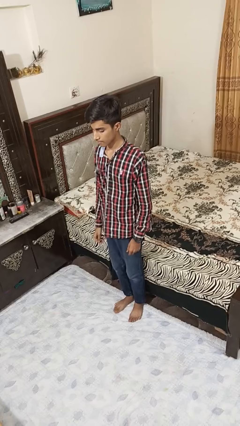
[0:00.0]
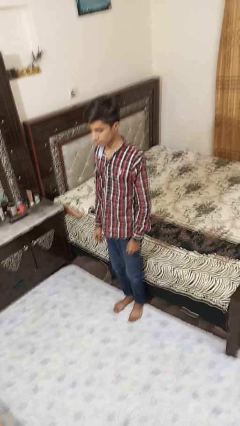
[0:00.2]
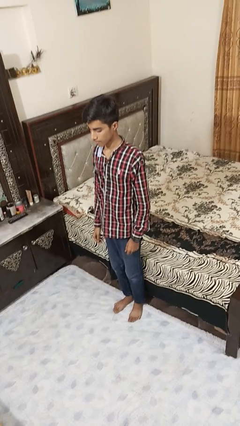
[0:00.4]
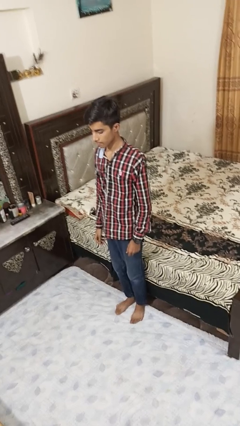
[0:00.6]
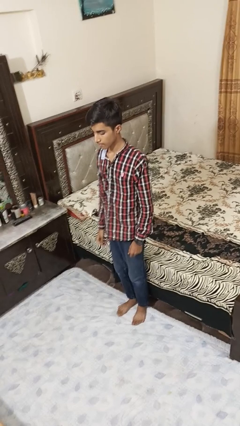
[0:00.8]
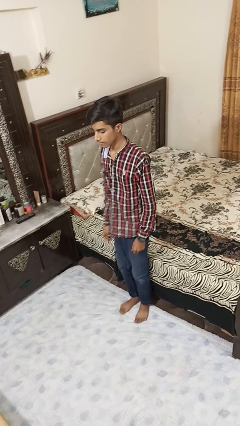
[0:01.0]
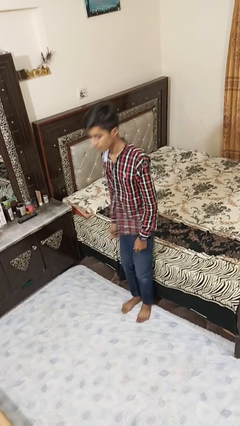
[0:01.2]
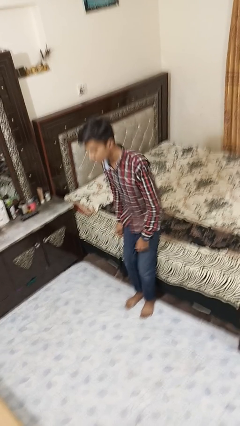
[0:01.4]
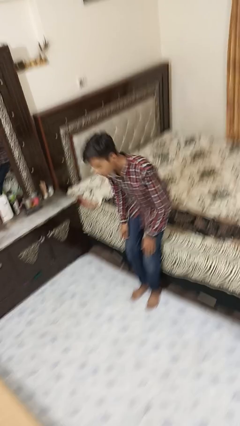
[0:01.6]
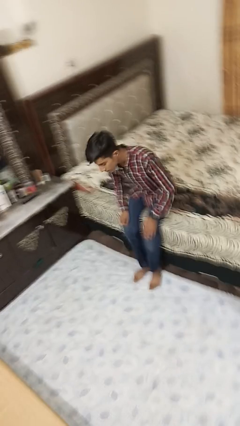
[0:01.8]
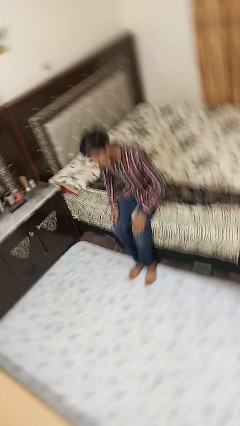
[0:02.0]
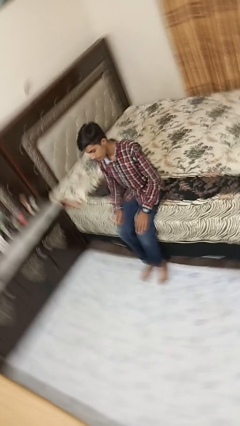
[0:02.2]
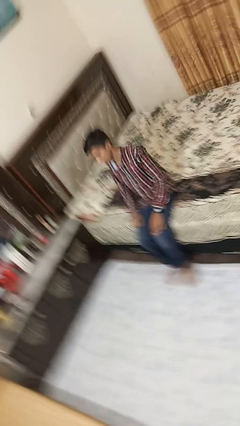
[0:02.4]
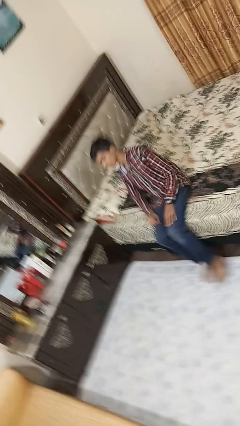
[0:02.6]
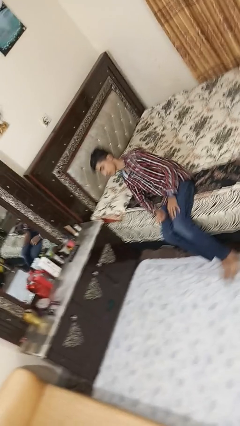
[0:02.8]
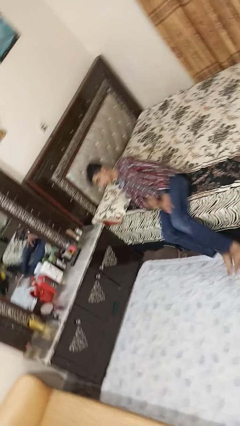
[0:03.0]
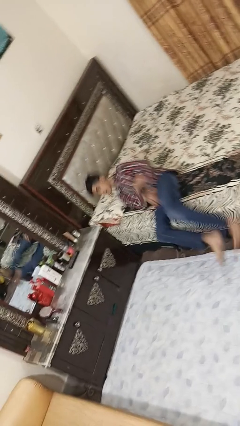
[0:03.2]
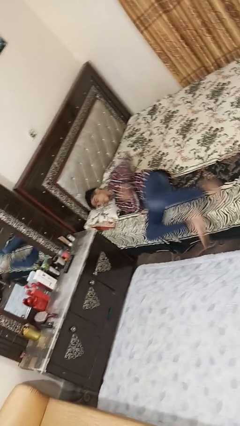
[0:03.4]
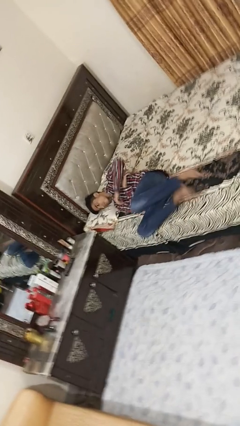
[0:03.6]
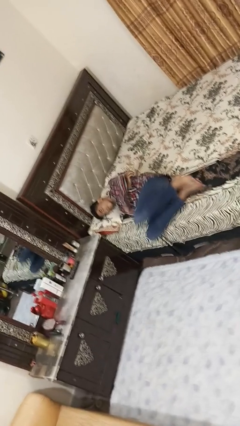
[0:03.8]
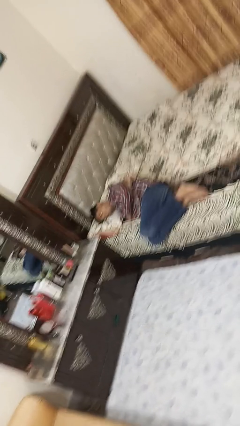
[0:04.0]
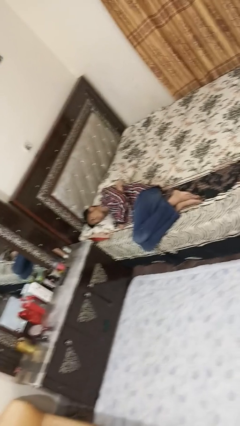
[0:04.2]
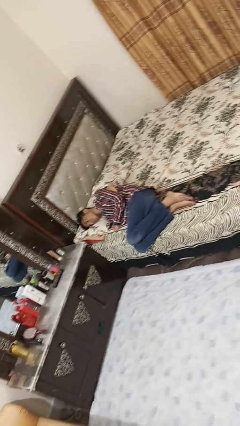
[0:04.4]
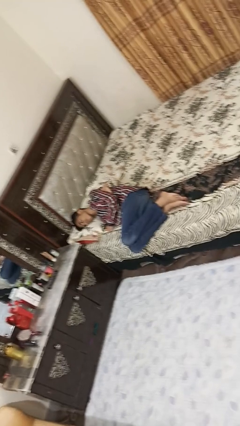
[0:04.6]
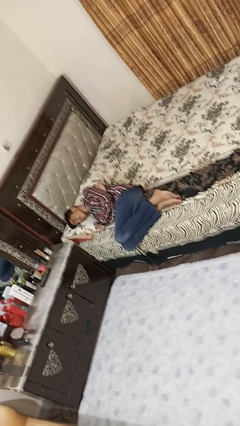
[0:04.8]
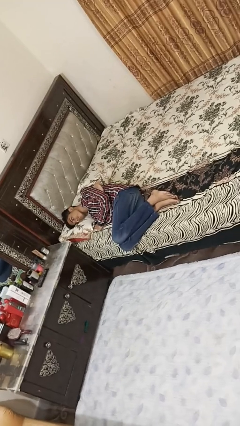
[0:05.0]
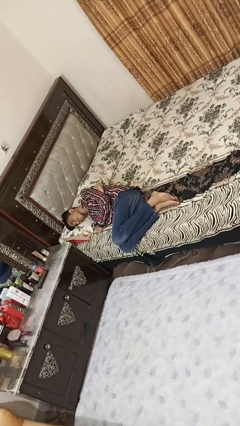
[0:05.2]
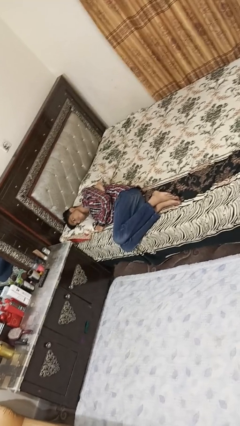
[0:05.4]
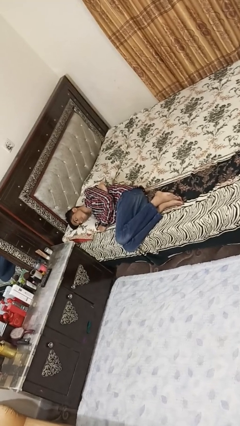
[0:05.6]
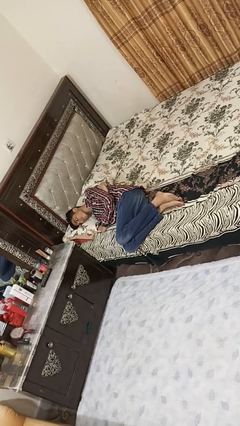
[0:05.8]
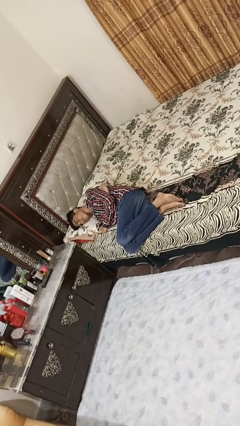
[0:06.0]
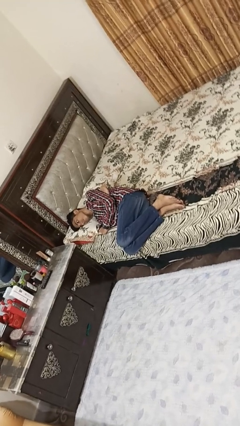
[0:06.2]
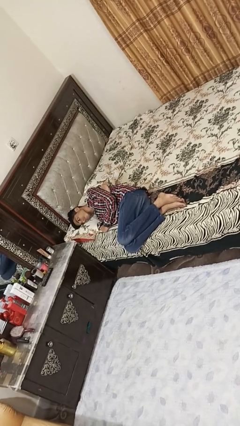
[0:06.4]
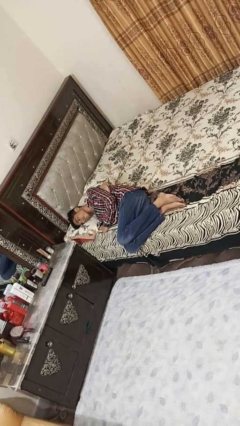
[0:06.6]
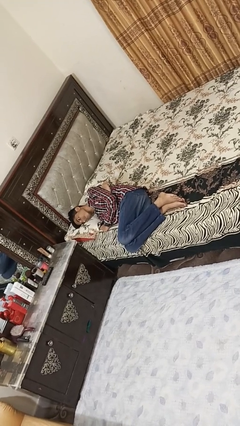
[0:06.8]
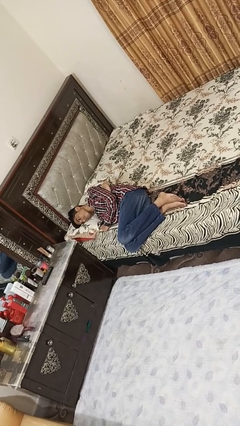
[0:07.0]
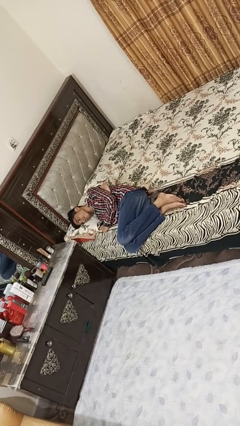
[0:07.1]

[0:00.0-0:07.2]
person lies down on bed

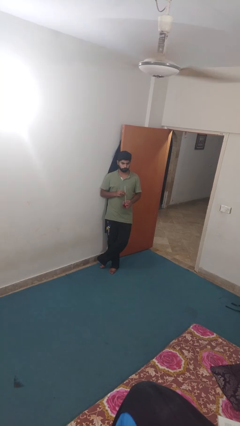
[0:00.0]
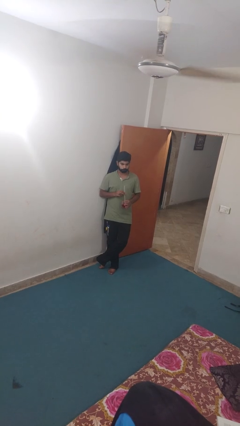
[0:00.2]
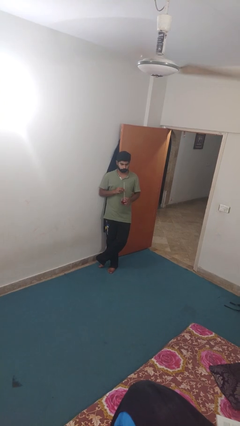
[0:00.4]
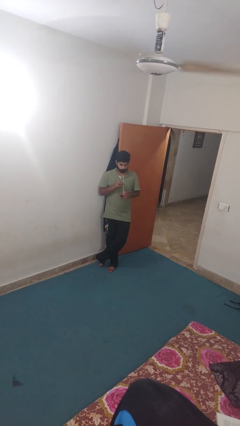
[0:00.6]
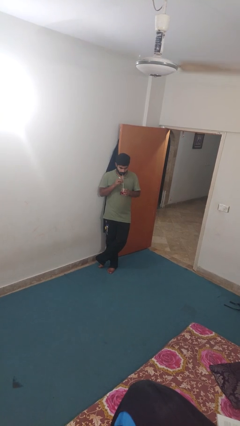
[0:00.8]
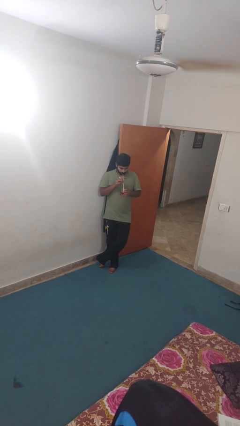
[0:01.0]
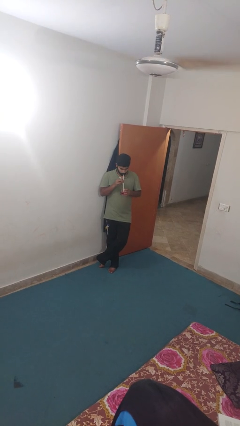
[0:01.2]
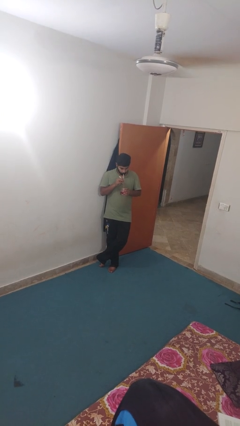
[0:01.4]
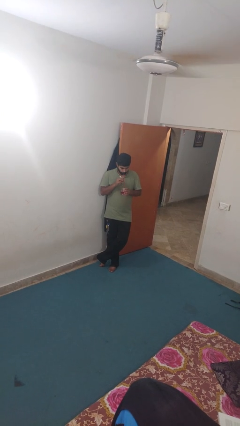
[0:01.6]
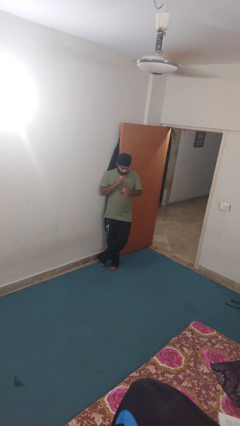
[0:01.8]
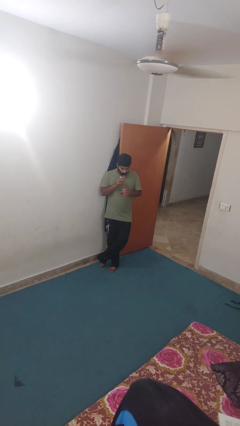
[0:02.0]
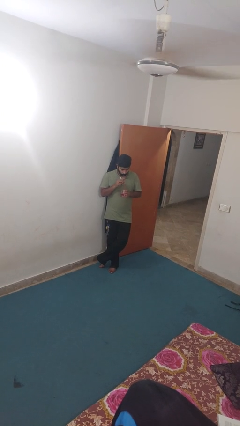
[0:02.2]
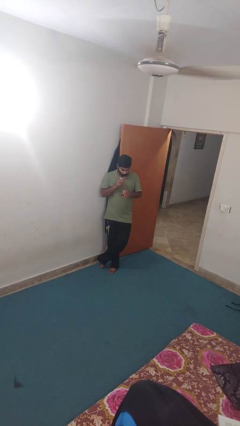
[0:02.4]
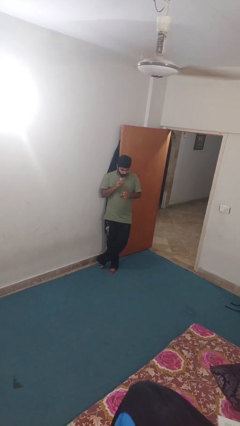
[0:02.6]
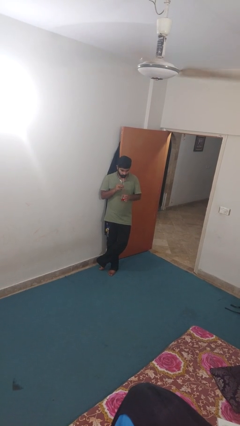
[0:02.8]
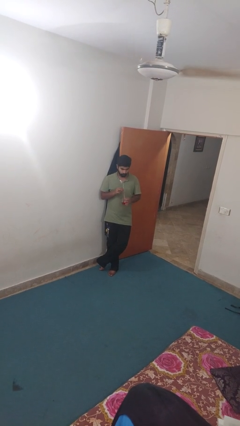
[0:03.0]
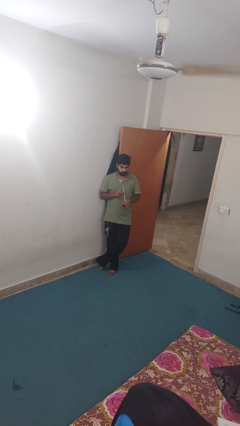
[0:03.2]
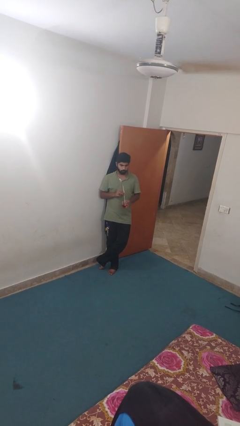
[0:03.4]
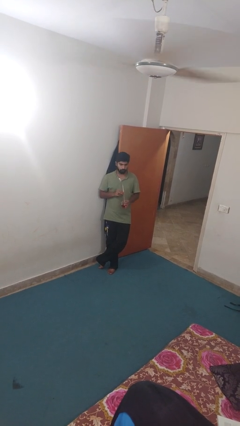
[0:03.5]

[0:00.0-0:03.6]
person drinks from straw

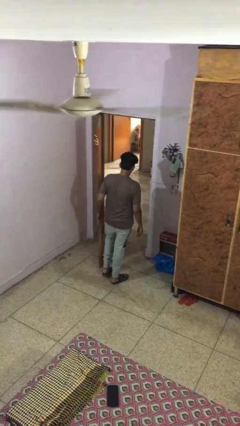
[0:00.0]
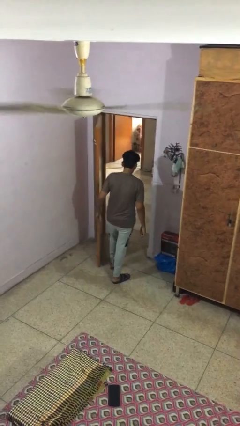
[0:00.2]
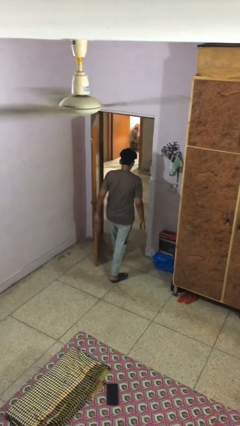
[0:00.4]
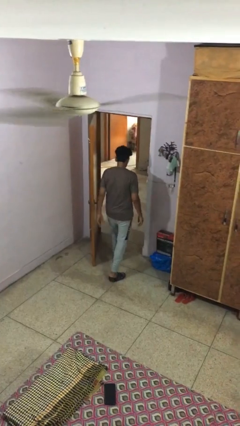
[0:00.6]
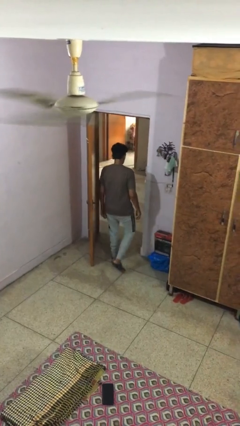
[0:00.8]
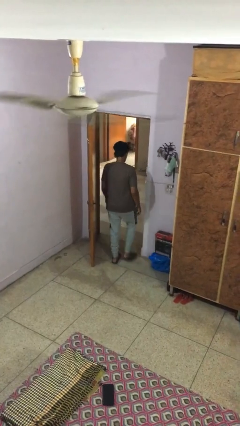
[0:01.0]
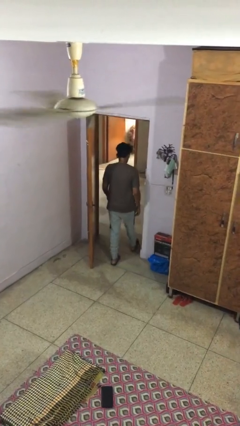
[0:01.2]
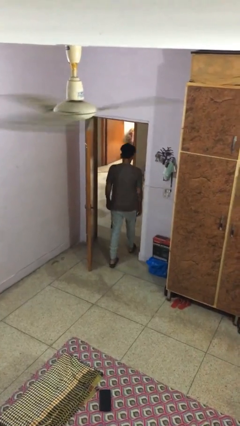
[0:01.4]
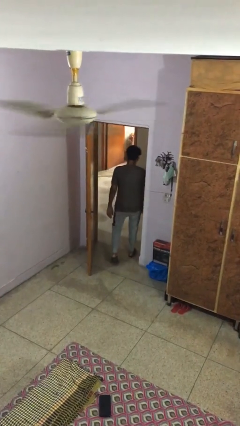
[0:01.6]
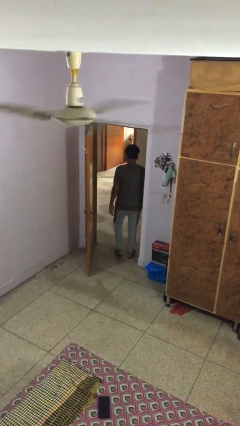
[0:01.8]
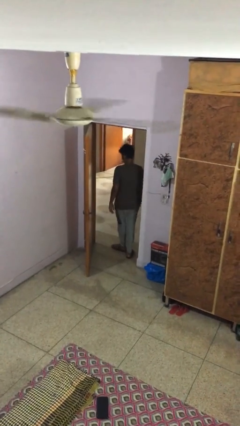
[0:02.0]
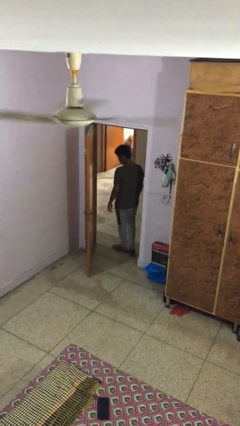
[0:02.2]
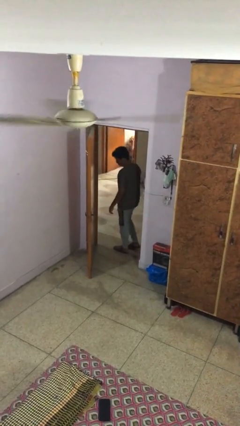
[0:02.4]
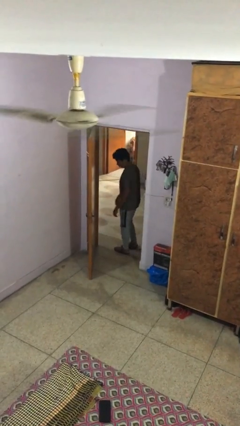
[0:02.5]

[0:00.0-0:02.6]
person exits scene through structure

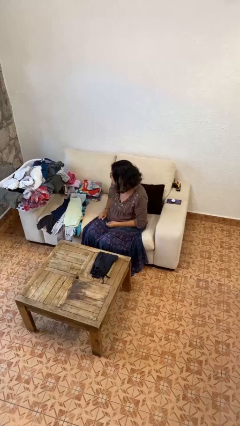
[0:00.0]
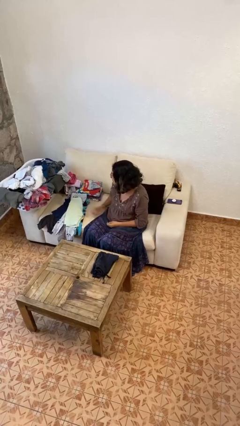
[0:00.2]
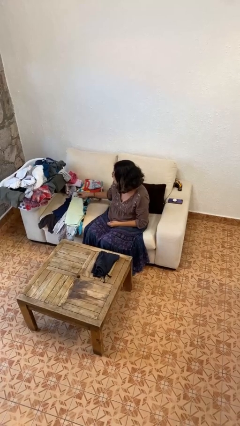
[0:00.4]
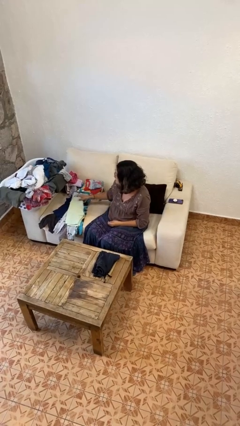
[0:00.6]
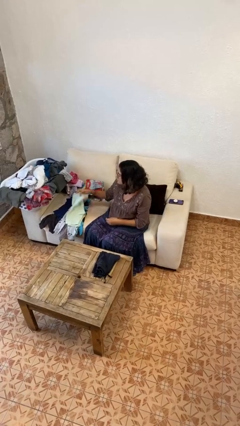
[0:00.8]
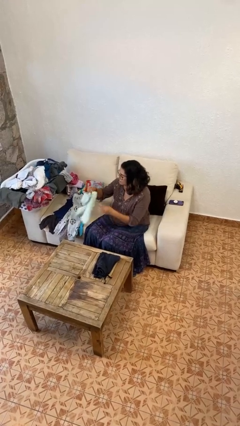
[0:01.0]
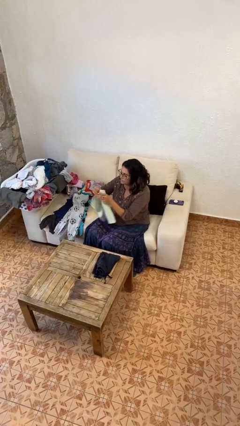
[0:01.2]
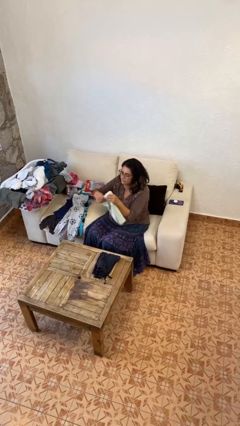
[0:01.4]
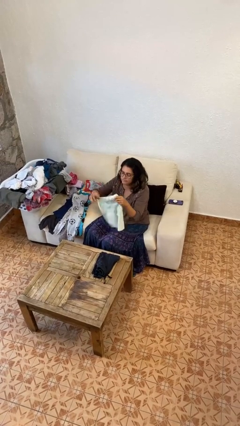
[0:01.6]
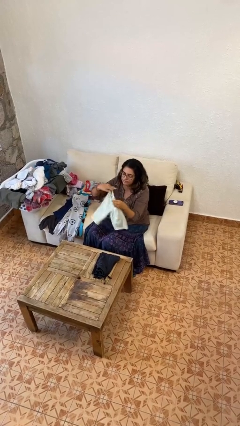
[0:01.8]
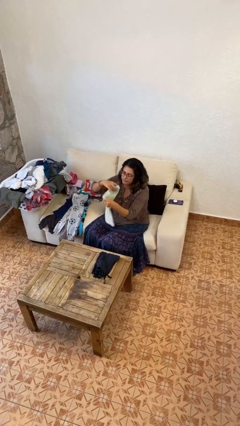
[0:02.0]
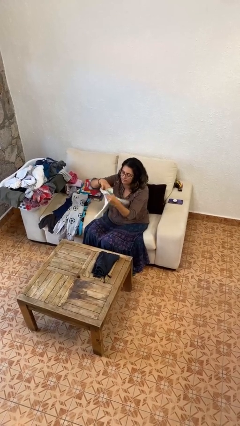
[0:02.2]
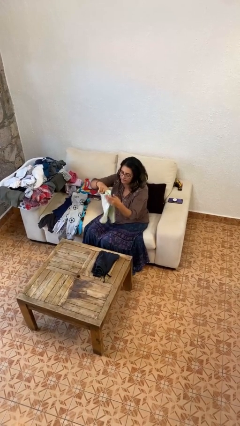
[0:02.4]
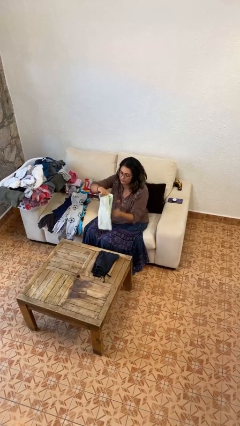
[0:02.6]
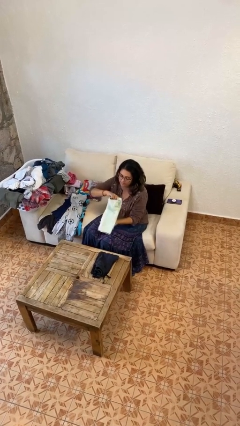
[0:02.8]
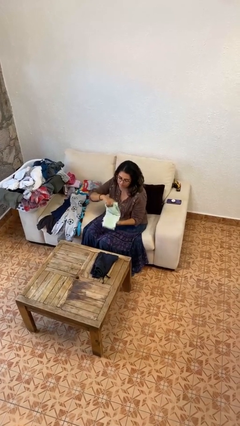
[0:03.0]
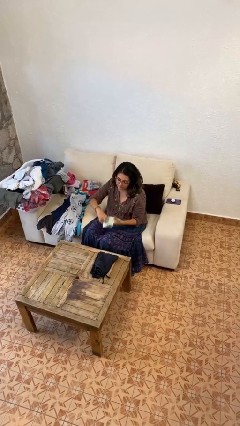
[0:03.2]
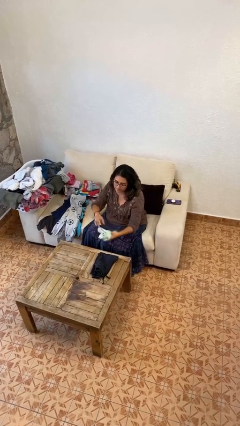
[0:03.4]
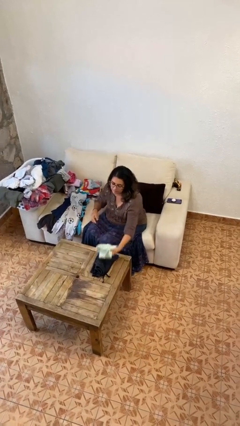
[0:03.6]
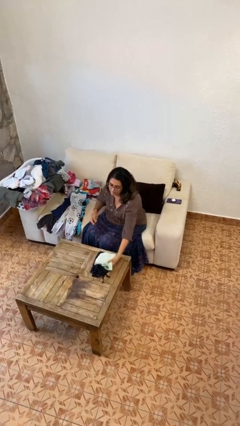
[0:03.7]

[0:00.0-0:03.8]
person folds pants

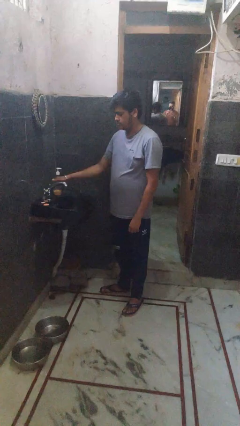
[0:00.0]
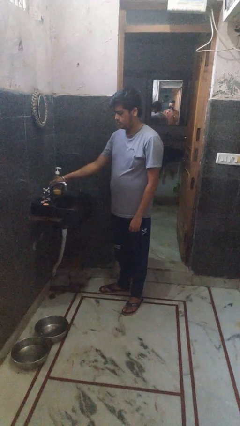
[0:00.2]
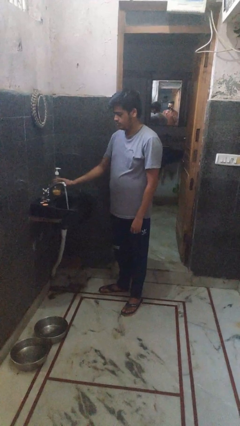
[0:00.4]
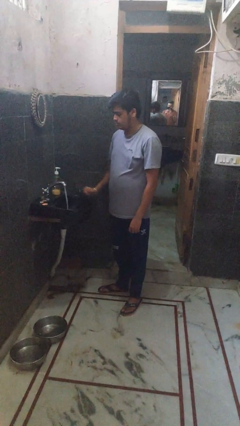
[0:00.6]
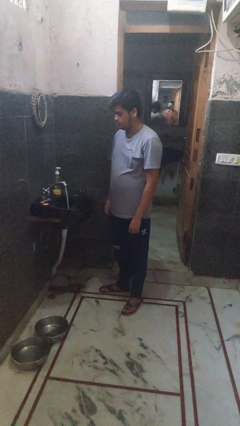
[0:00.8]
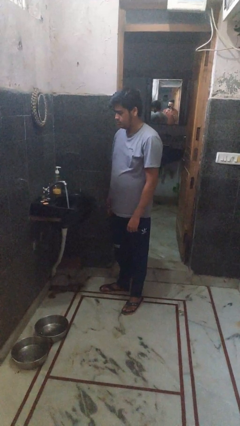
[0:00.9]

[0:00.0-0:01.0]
person turns on faucet
